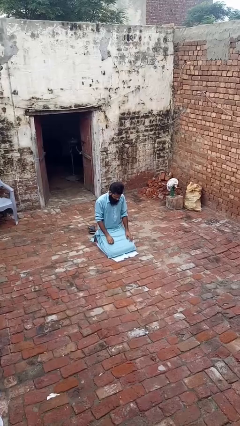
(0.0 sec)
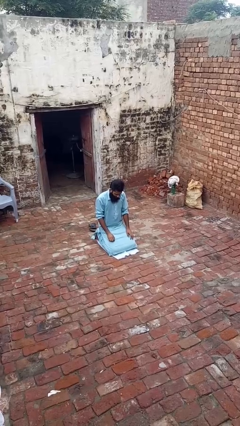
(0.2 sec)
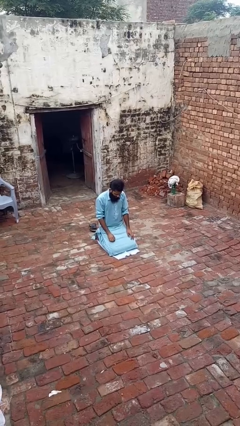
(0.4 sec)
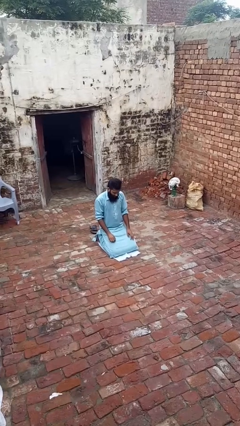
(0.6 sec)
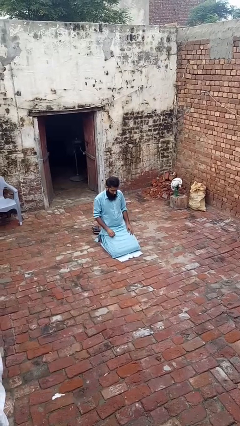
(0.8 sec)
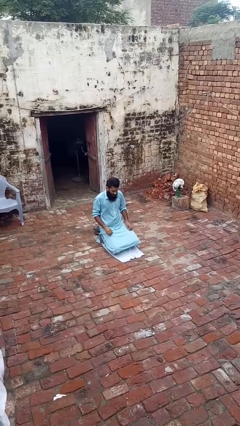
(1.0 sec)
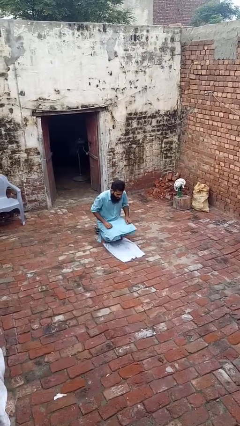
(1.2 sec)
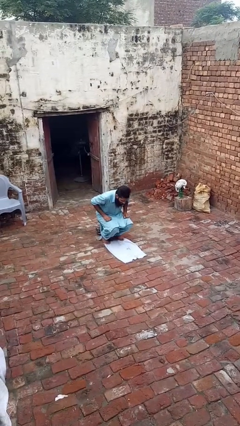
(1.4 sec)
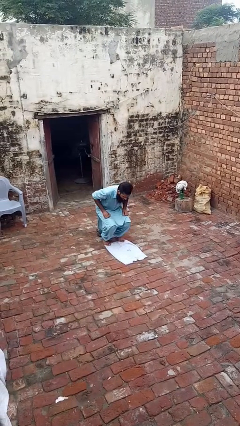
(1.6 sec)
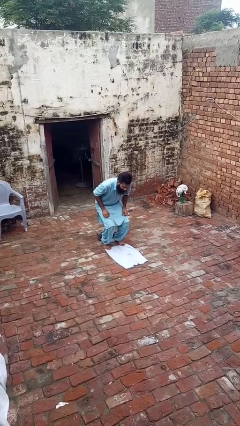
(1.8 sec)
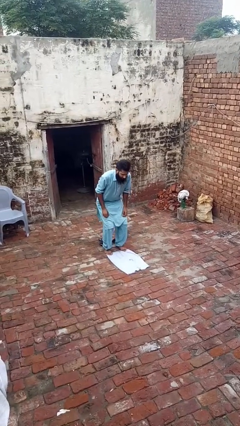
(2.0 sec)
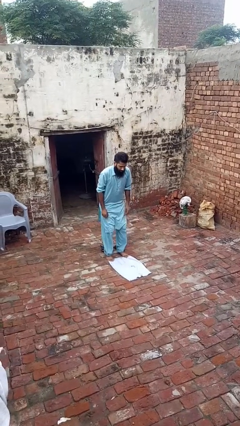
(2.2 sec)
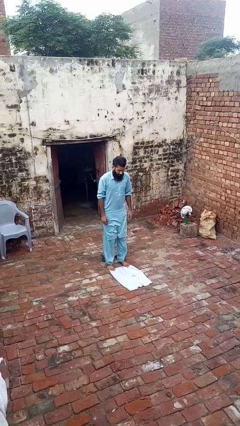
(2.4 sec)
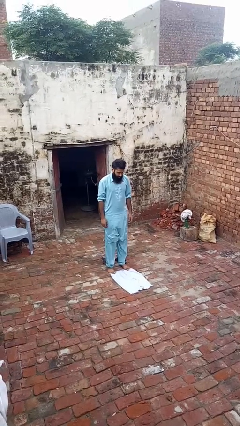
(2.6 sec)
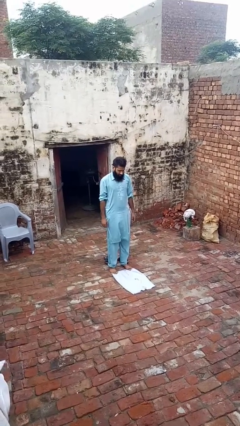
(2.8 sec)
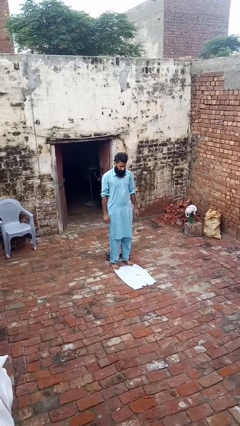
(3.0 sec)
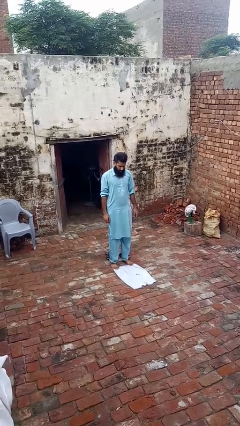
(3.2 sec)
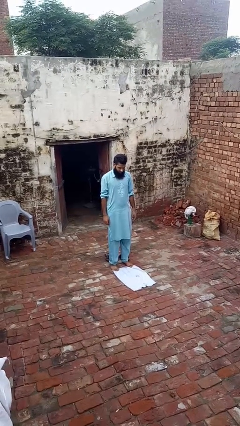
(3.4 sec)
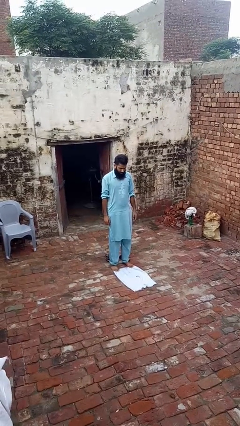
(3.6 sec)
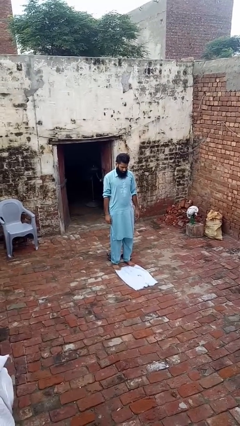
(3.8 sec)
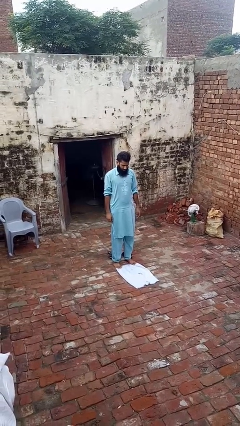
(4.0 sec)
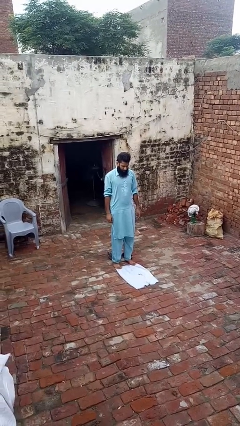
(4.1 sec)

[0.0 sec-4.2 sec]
person stands up

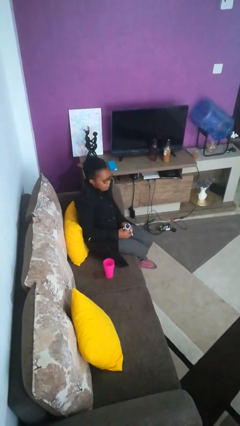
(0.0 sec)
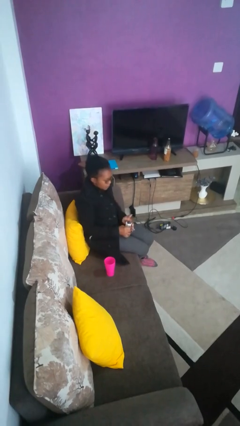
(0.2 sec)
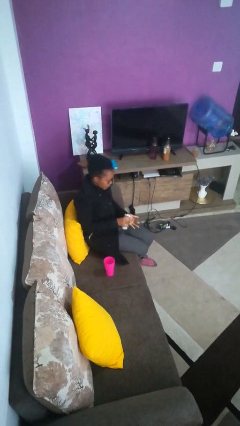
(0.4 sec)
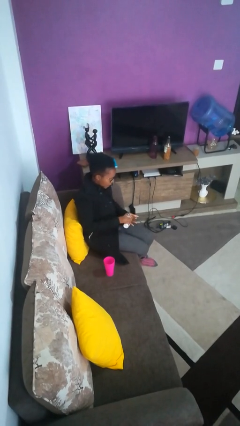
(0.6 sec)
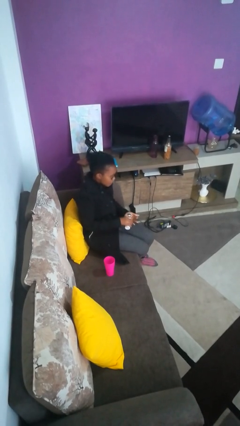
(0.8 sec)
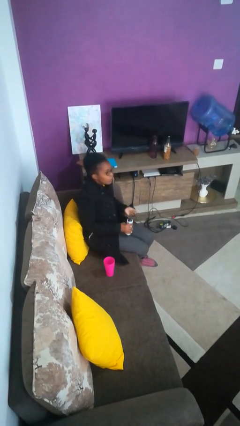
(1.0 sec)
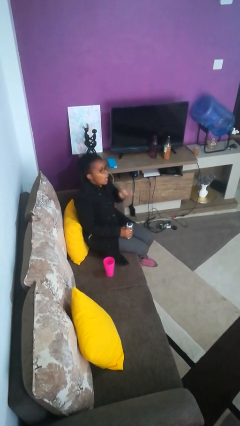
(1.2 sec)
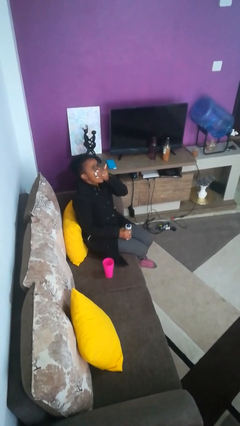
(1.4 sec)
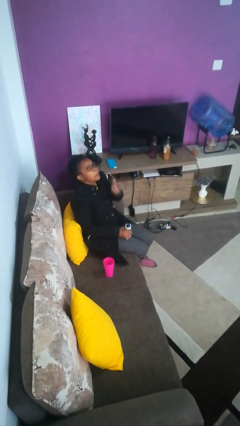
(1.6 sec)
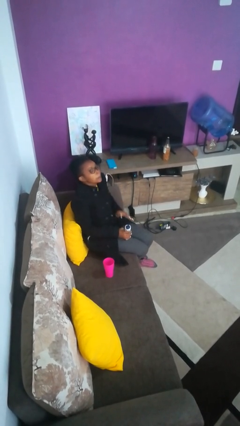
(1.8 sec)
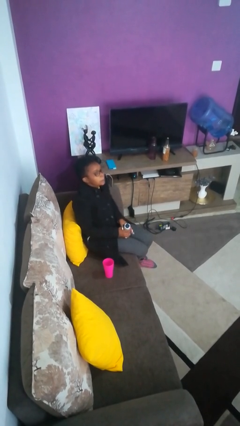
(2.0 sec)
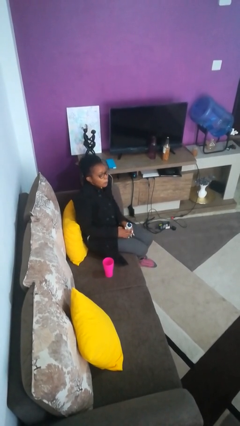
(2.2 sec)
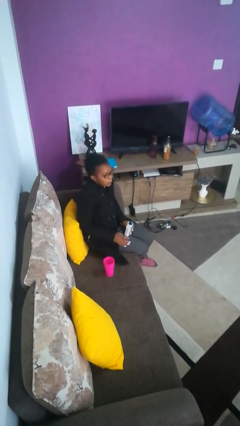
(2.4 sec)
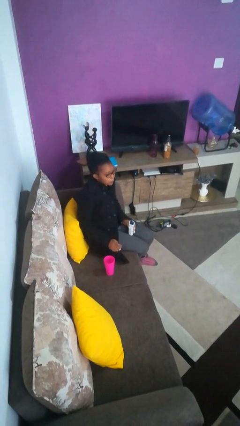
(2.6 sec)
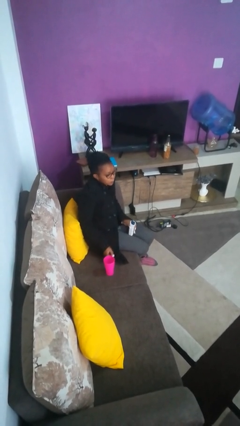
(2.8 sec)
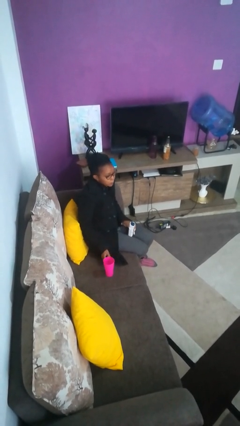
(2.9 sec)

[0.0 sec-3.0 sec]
person takes medicine pills

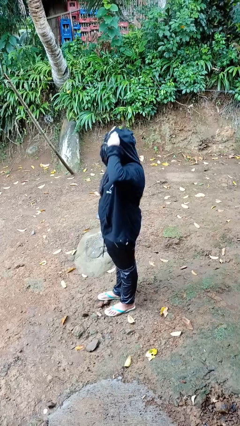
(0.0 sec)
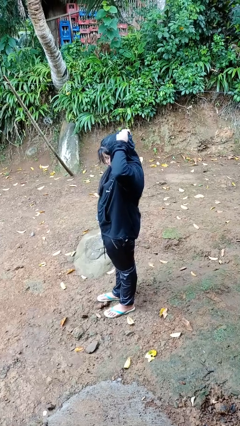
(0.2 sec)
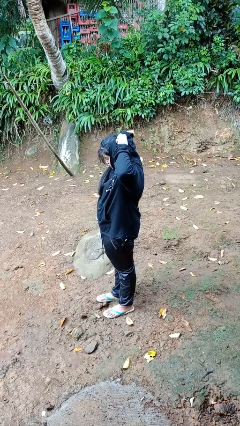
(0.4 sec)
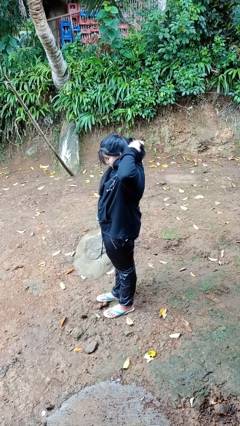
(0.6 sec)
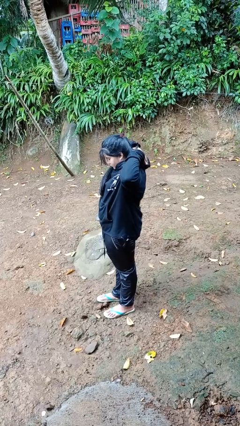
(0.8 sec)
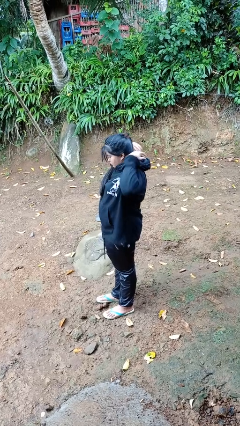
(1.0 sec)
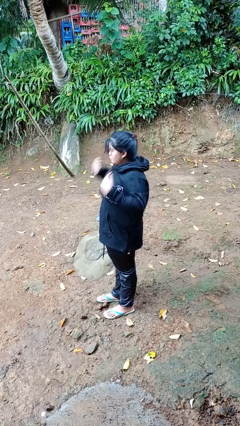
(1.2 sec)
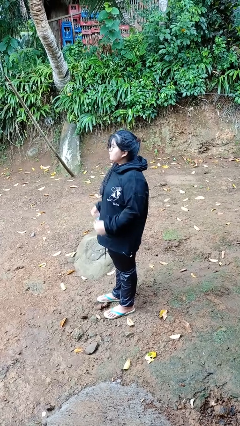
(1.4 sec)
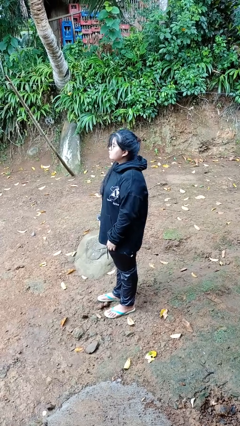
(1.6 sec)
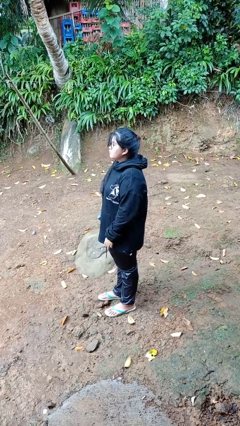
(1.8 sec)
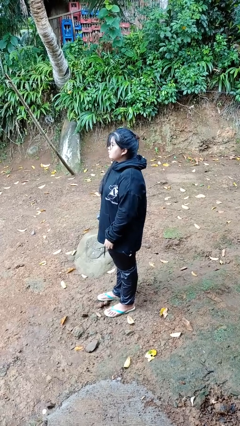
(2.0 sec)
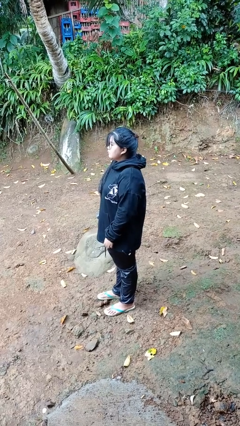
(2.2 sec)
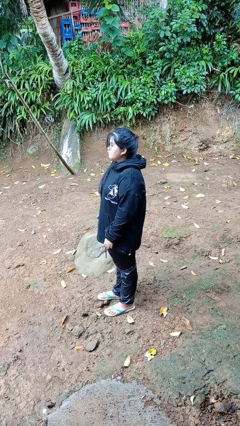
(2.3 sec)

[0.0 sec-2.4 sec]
person takes off hoodie

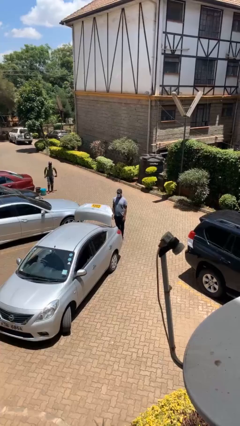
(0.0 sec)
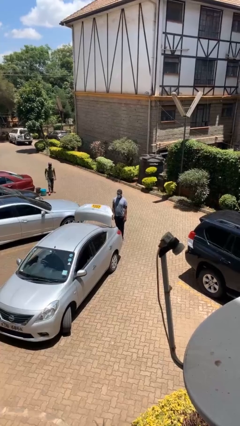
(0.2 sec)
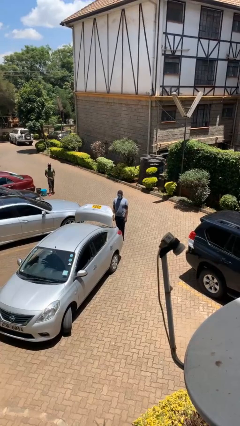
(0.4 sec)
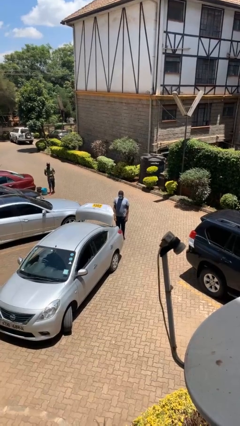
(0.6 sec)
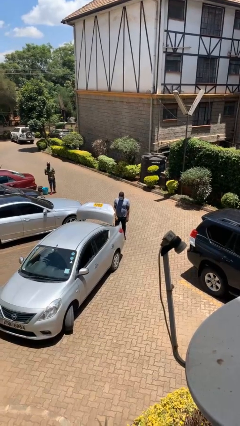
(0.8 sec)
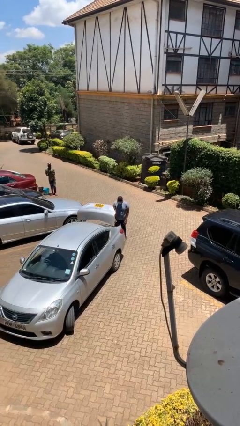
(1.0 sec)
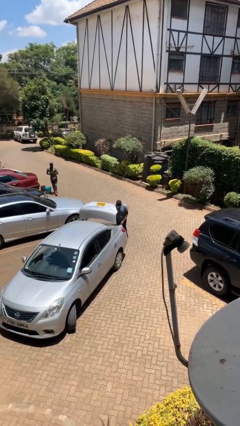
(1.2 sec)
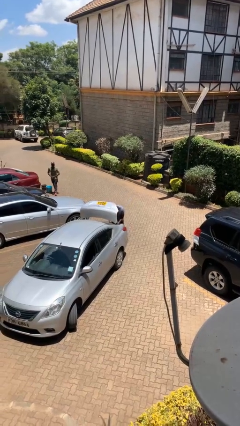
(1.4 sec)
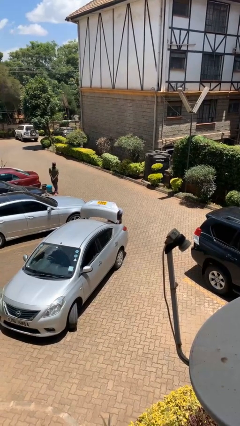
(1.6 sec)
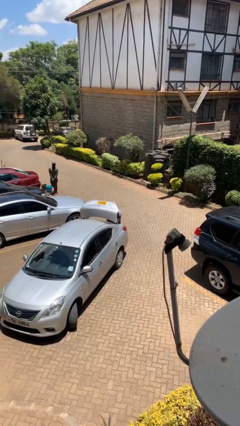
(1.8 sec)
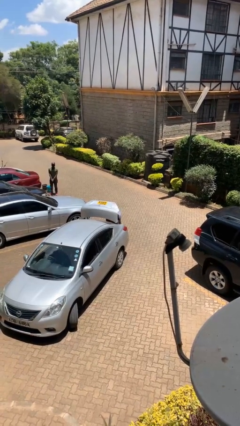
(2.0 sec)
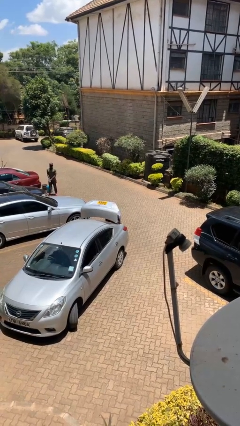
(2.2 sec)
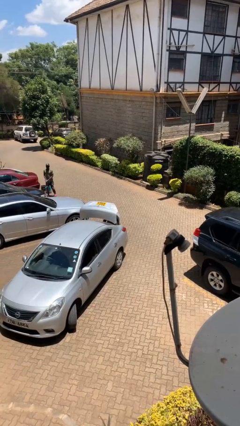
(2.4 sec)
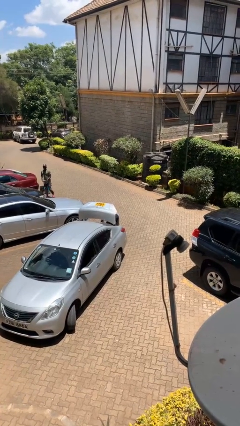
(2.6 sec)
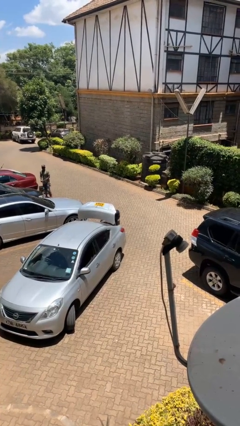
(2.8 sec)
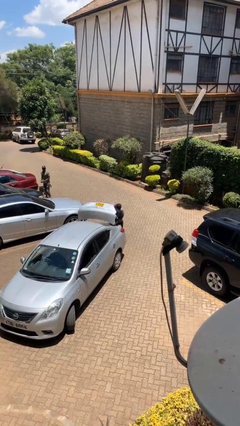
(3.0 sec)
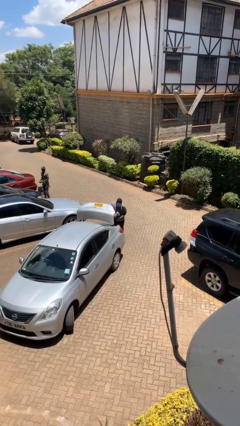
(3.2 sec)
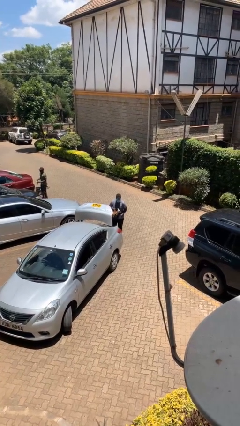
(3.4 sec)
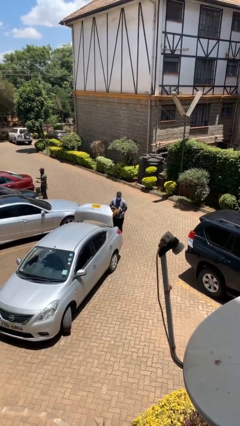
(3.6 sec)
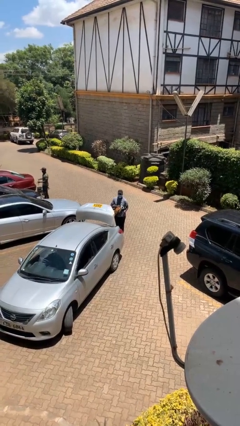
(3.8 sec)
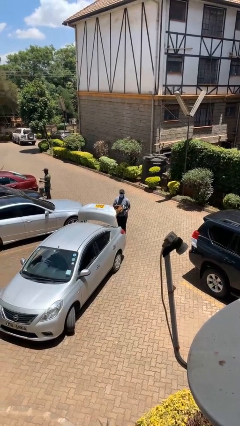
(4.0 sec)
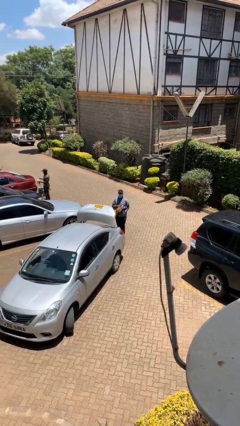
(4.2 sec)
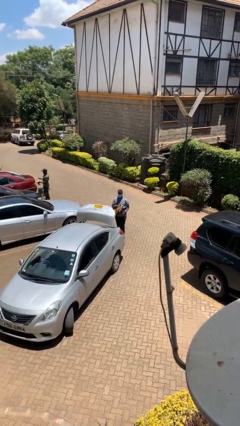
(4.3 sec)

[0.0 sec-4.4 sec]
person unloads car

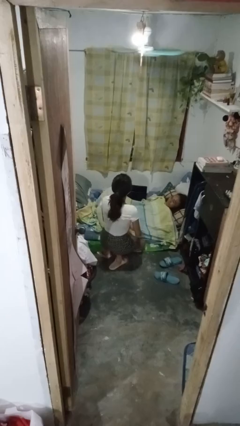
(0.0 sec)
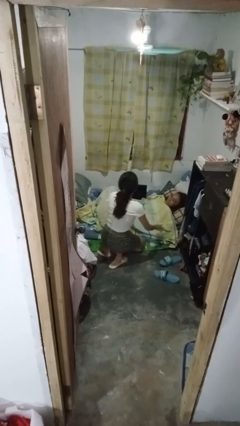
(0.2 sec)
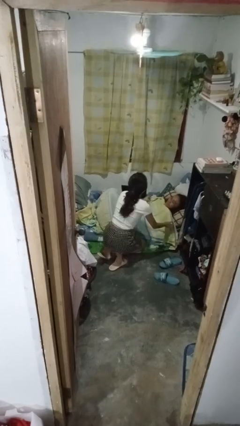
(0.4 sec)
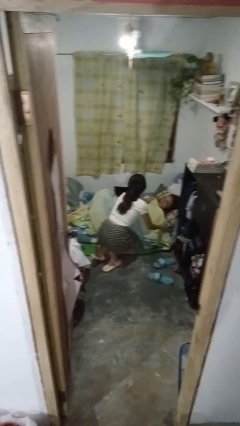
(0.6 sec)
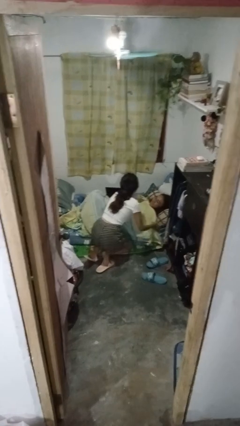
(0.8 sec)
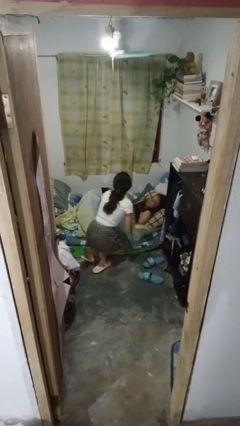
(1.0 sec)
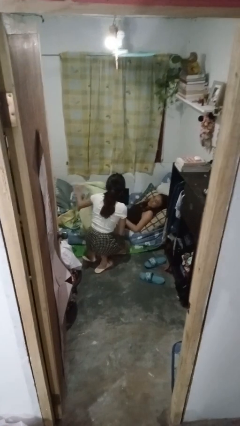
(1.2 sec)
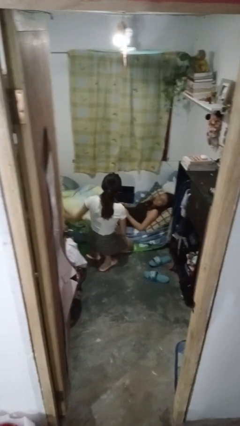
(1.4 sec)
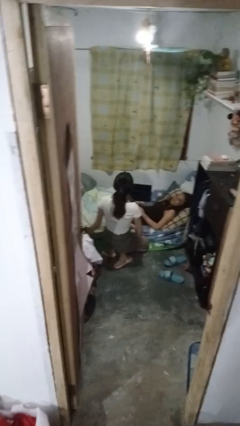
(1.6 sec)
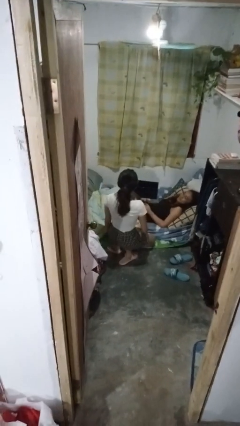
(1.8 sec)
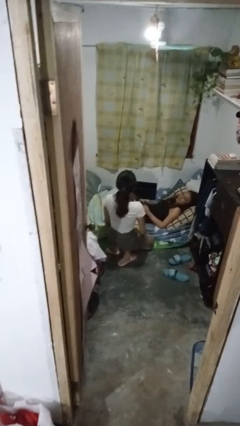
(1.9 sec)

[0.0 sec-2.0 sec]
person uncovers friend with blanket

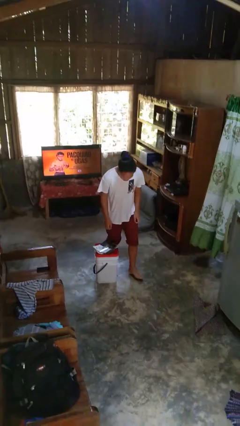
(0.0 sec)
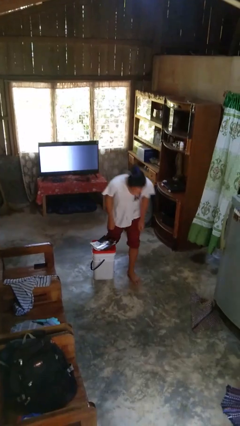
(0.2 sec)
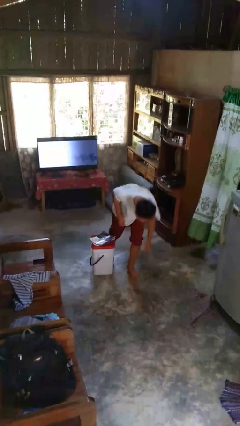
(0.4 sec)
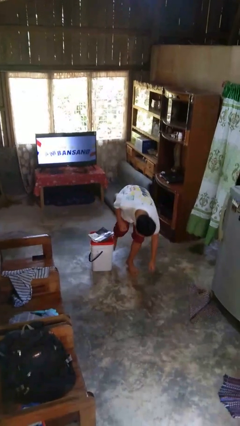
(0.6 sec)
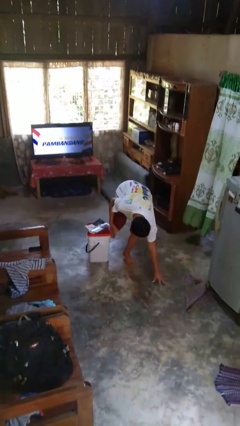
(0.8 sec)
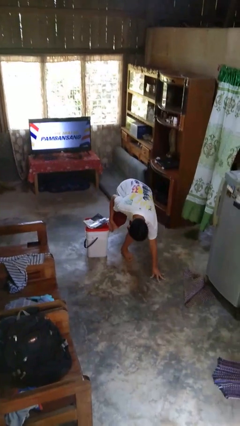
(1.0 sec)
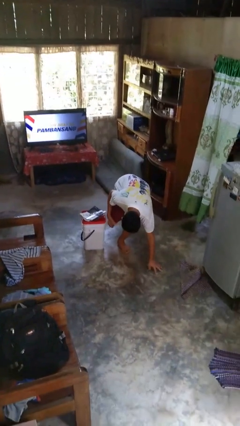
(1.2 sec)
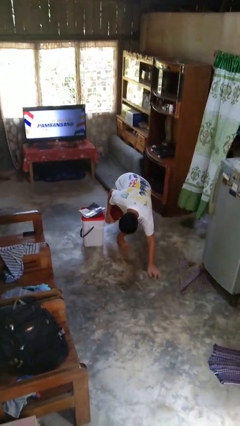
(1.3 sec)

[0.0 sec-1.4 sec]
person trips on object on floor
